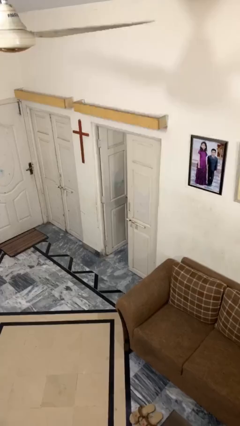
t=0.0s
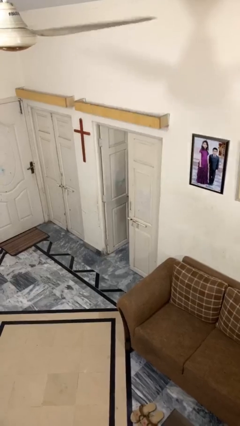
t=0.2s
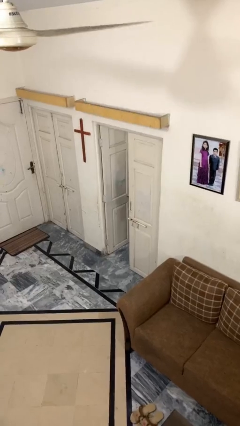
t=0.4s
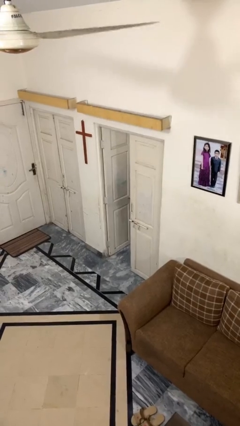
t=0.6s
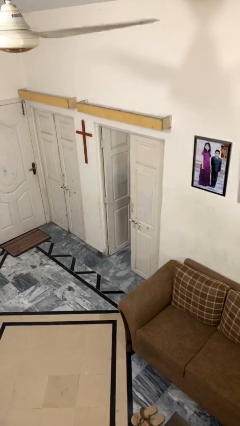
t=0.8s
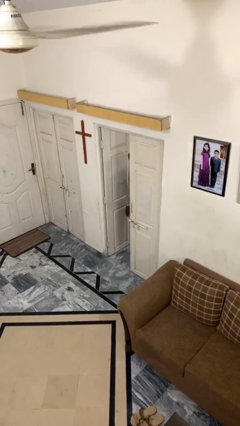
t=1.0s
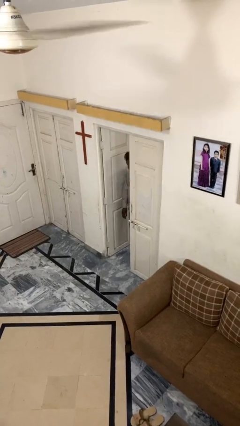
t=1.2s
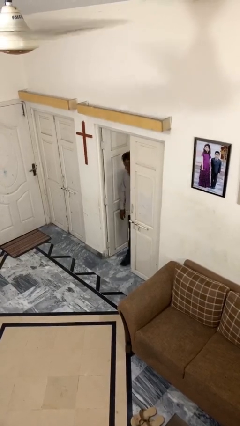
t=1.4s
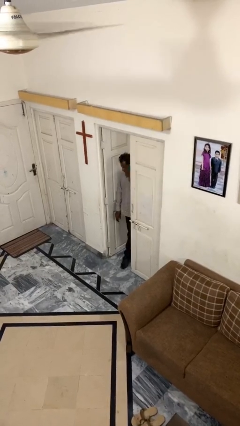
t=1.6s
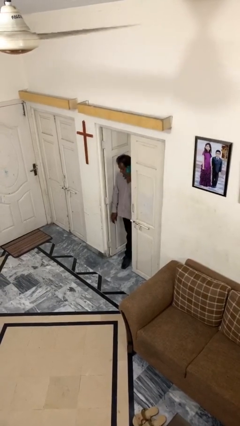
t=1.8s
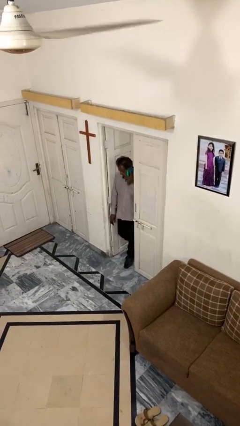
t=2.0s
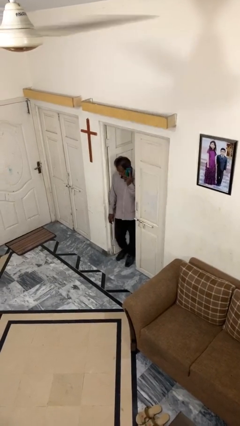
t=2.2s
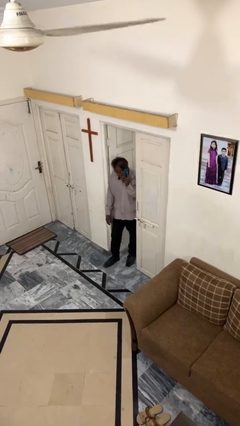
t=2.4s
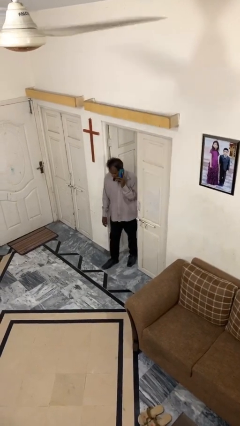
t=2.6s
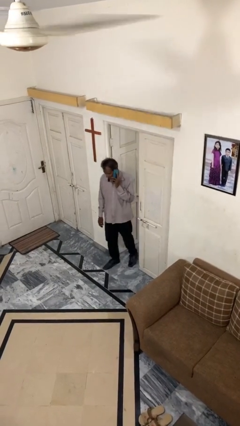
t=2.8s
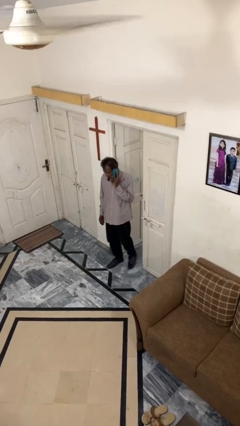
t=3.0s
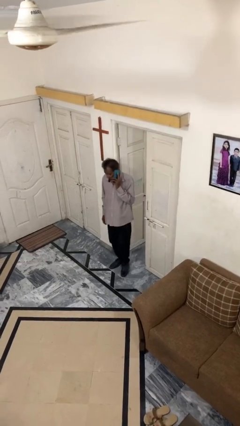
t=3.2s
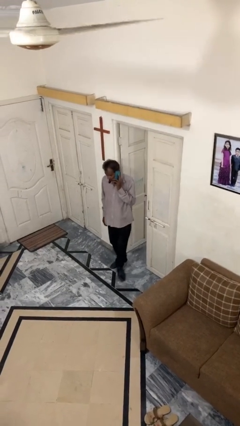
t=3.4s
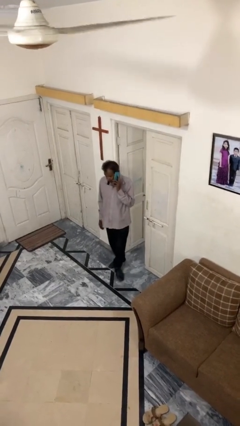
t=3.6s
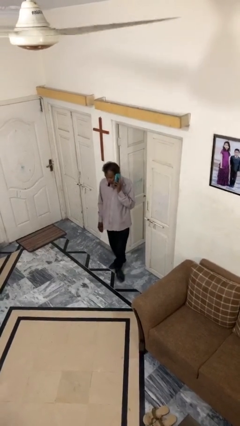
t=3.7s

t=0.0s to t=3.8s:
person enters scene through structure

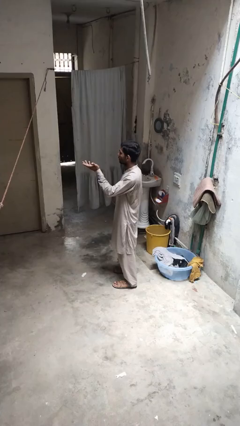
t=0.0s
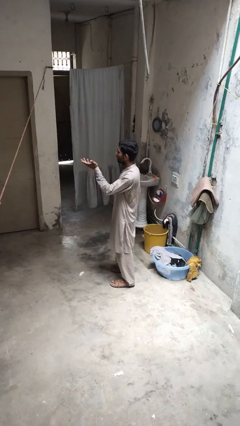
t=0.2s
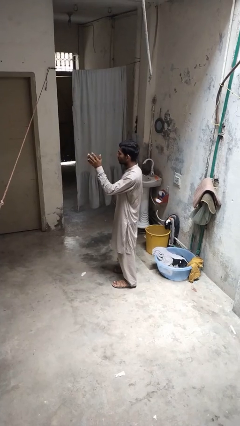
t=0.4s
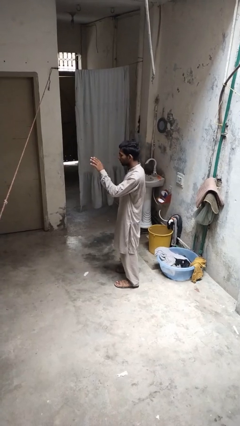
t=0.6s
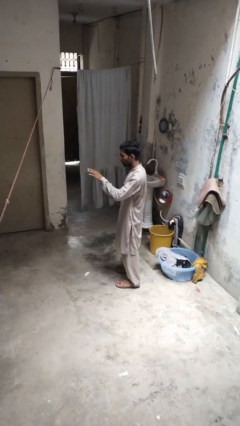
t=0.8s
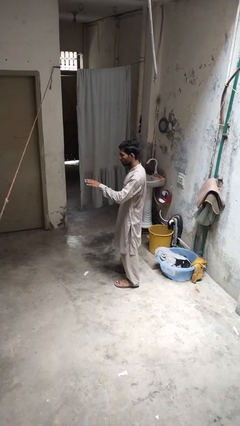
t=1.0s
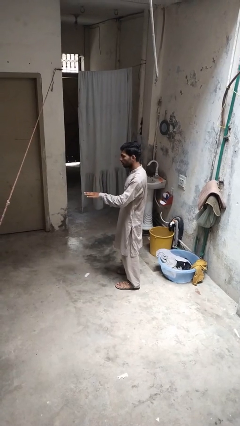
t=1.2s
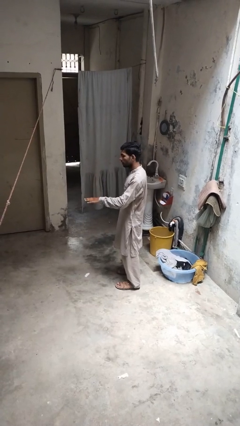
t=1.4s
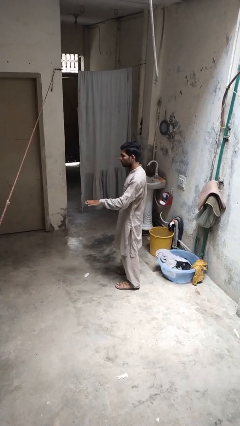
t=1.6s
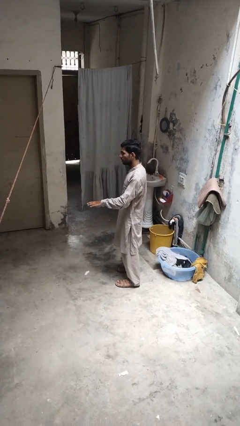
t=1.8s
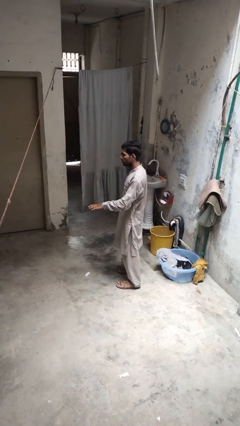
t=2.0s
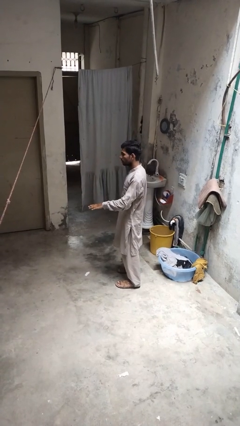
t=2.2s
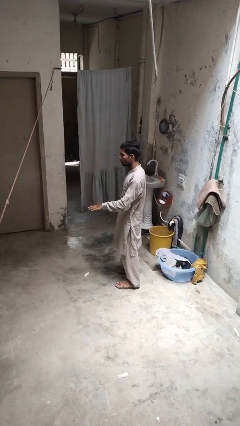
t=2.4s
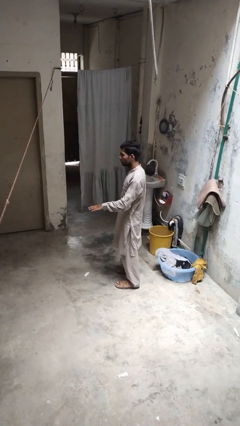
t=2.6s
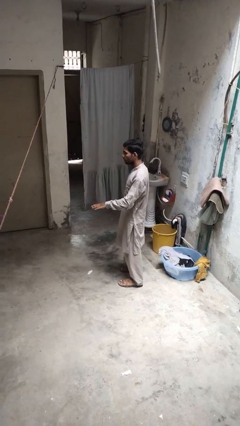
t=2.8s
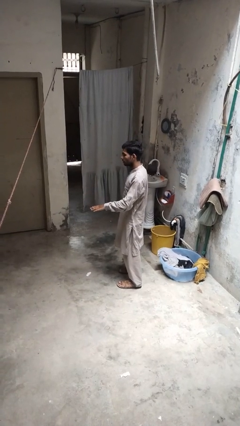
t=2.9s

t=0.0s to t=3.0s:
person gestures swipe down

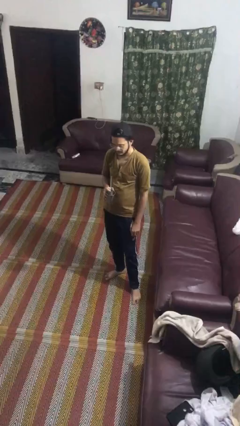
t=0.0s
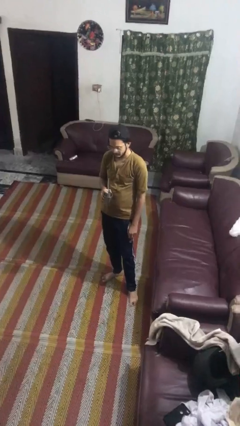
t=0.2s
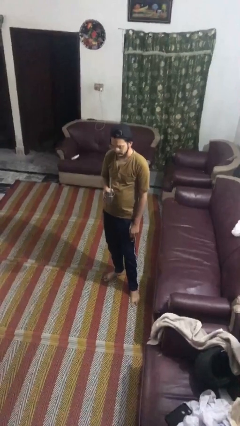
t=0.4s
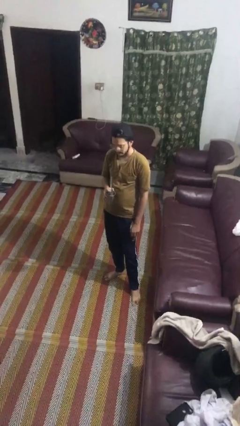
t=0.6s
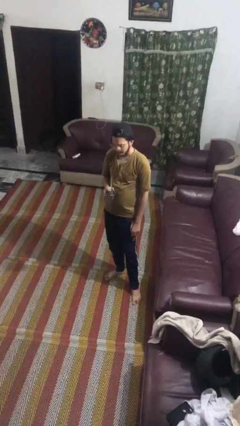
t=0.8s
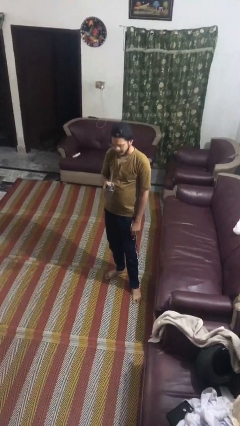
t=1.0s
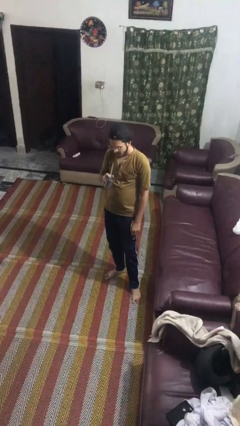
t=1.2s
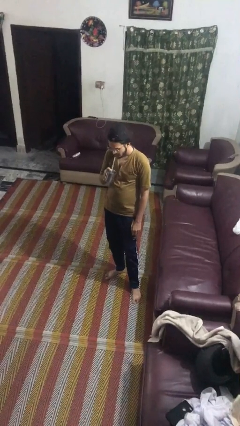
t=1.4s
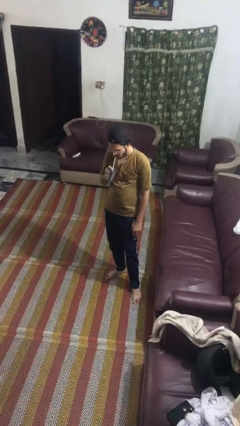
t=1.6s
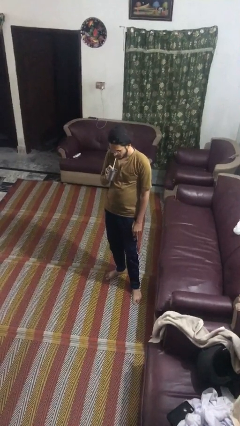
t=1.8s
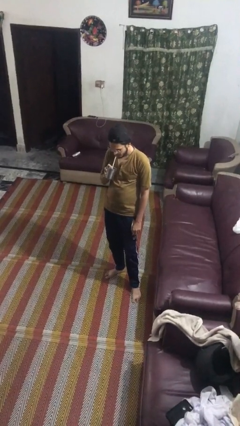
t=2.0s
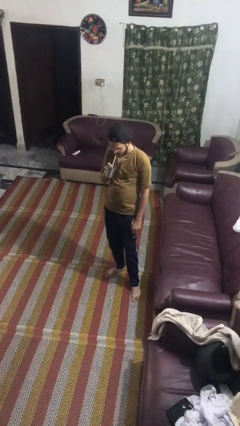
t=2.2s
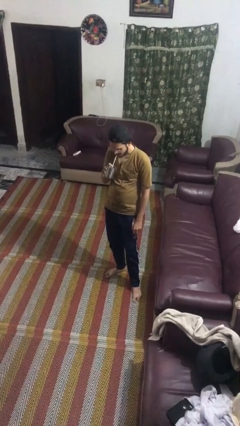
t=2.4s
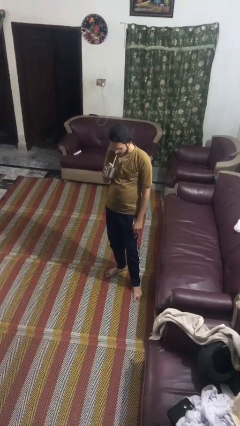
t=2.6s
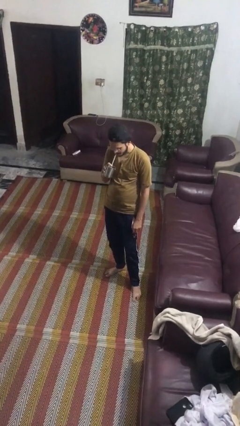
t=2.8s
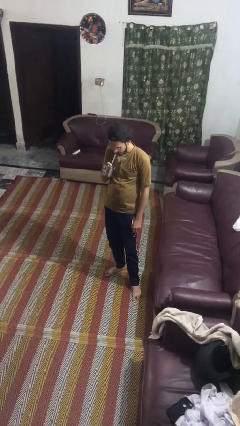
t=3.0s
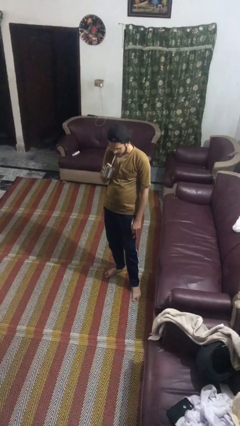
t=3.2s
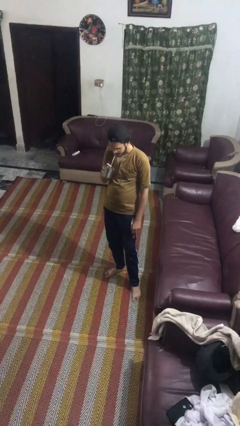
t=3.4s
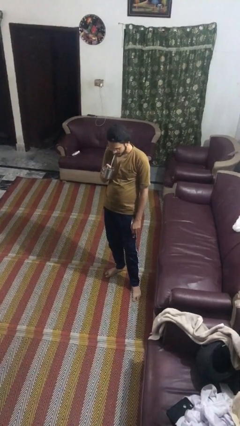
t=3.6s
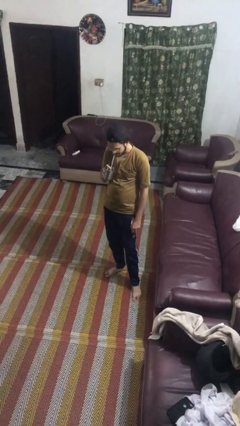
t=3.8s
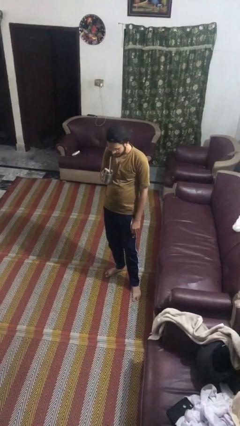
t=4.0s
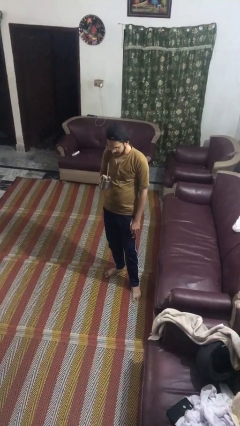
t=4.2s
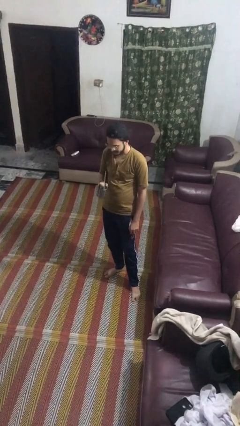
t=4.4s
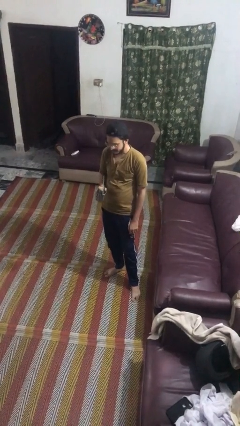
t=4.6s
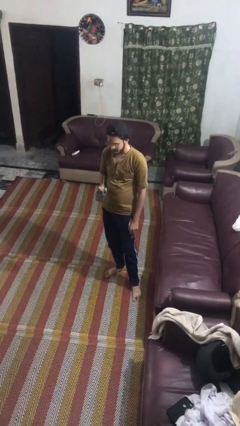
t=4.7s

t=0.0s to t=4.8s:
person drinks from straw

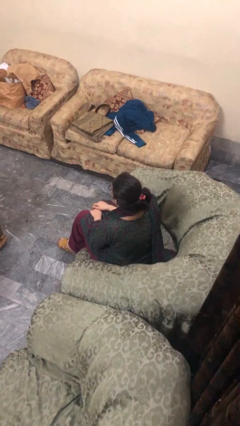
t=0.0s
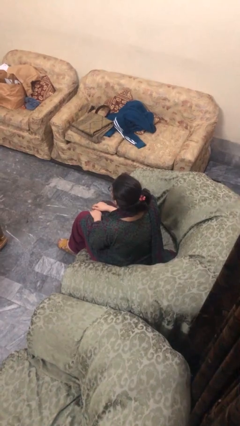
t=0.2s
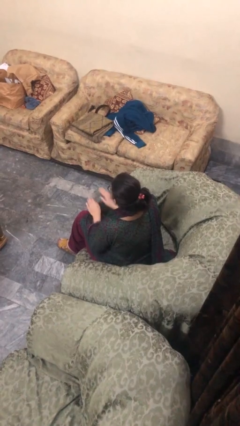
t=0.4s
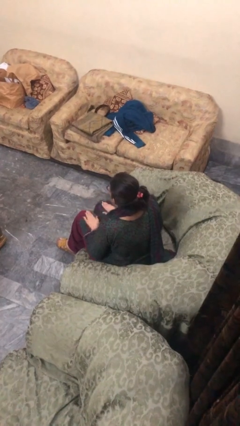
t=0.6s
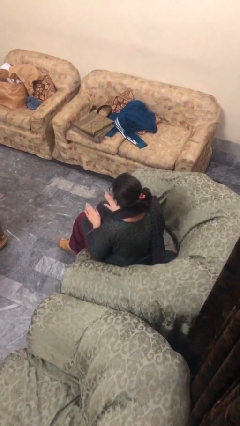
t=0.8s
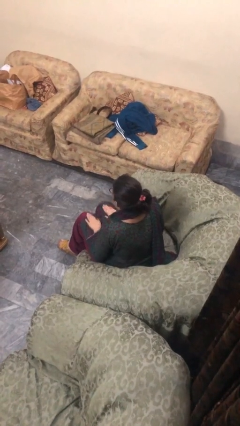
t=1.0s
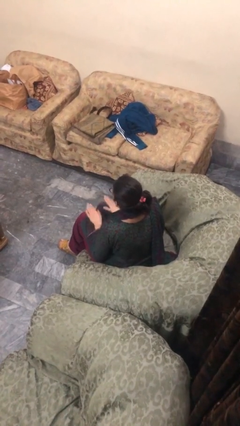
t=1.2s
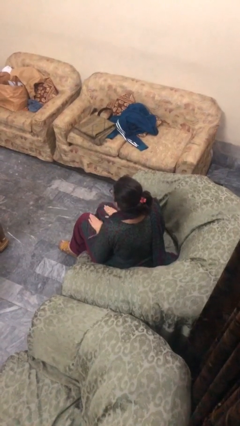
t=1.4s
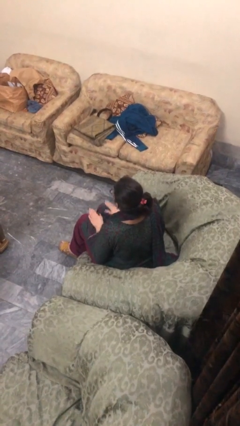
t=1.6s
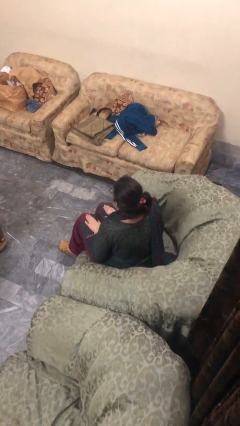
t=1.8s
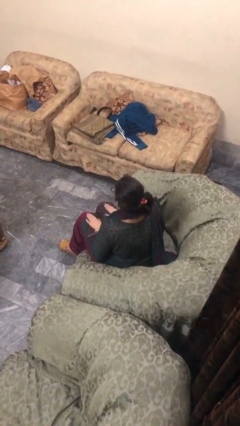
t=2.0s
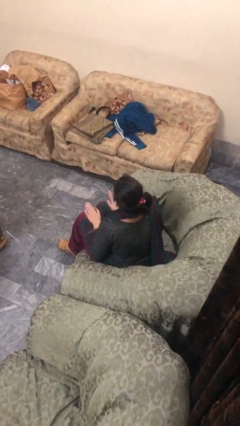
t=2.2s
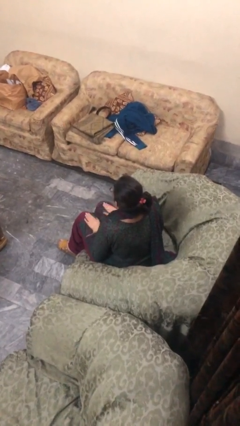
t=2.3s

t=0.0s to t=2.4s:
person slaps hands on thighs

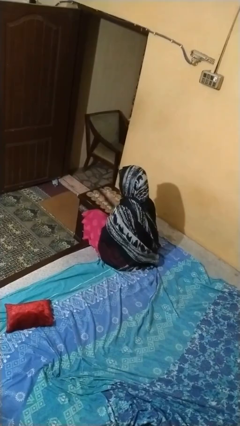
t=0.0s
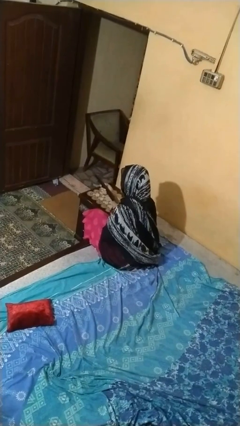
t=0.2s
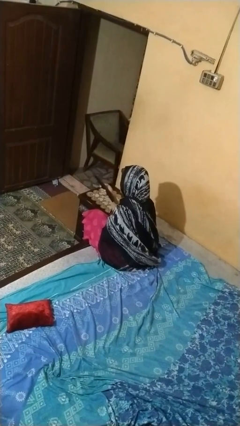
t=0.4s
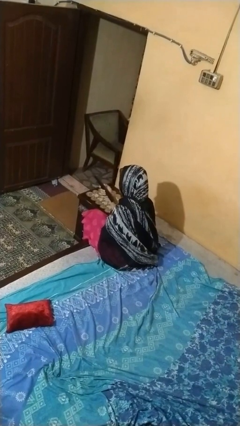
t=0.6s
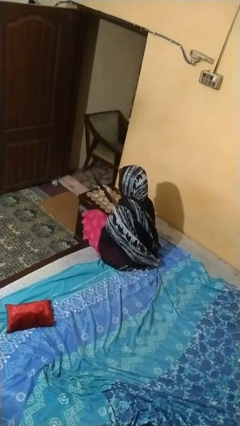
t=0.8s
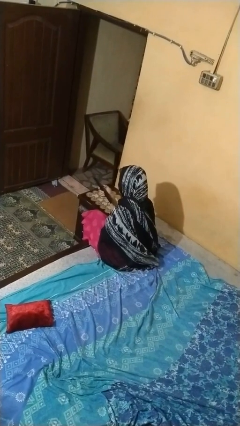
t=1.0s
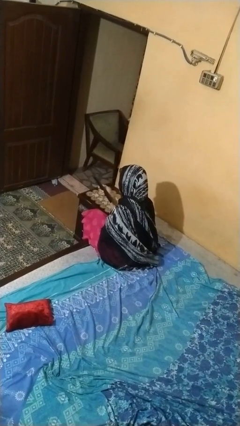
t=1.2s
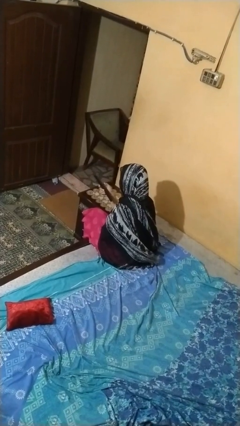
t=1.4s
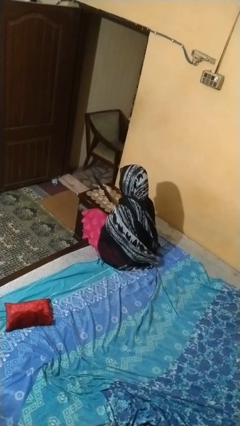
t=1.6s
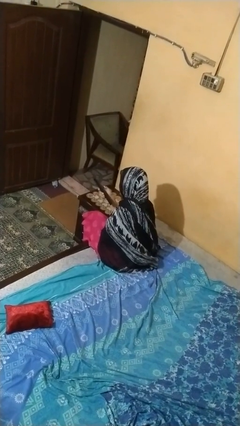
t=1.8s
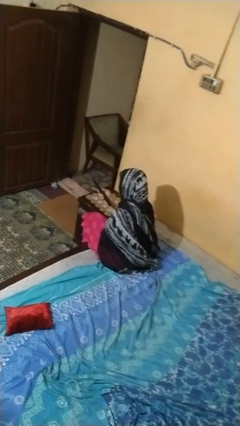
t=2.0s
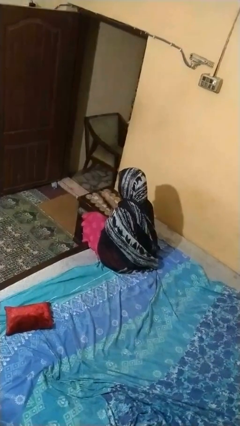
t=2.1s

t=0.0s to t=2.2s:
person uses television remote

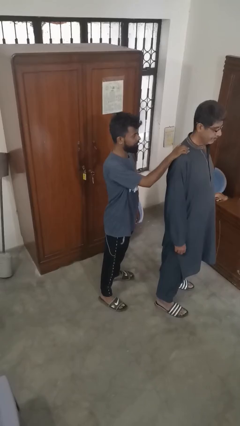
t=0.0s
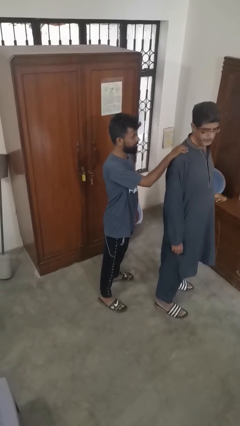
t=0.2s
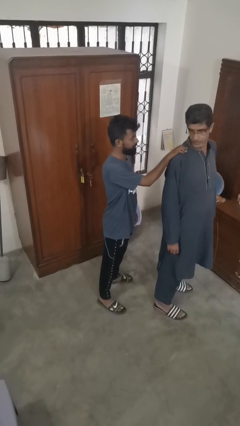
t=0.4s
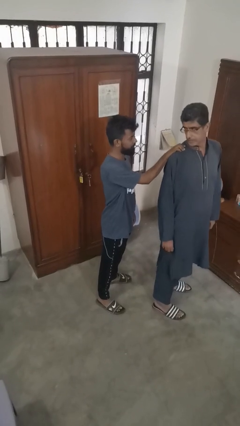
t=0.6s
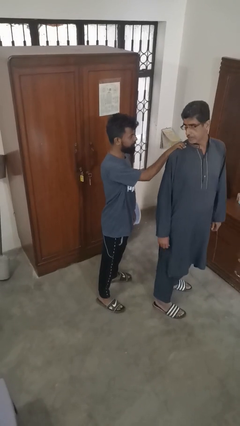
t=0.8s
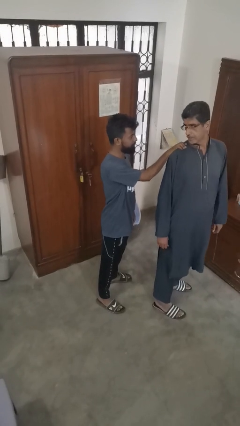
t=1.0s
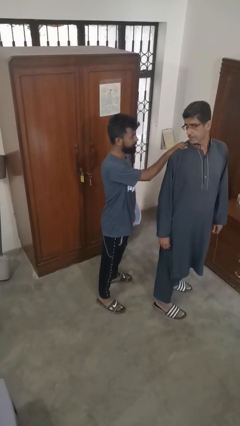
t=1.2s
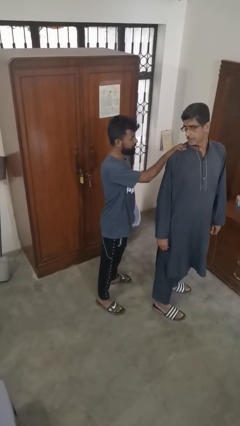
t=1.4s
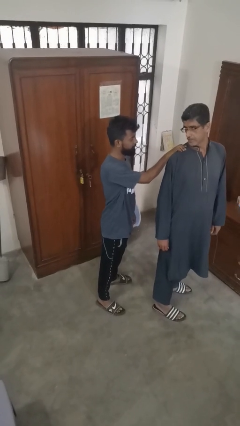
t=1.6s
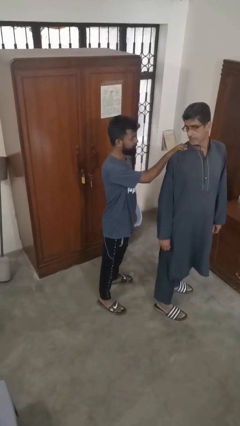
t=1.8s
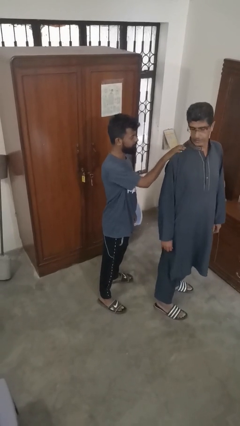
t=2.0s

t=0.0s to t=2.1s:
person spins person around
